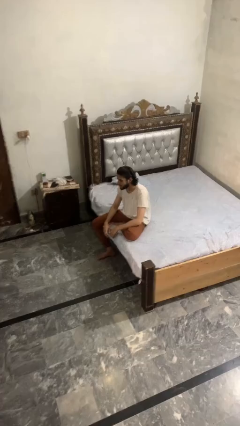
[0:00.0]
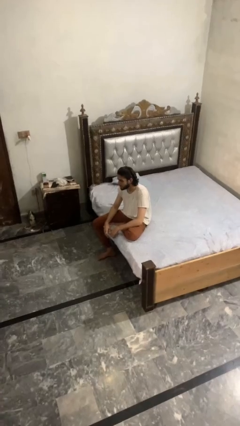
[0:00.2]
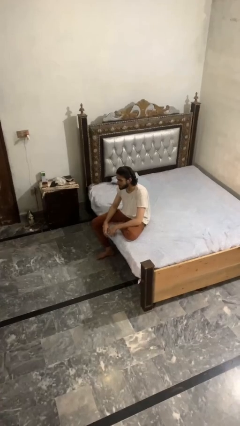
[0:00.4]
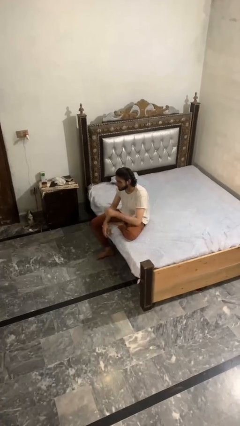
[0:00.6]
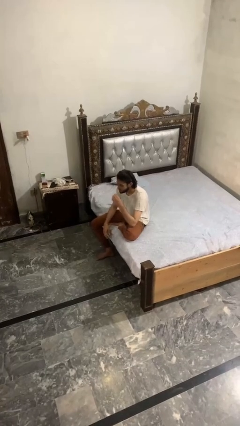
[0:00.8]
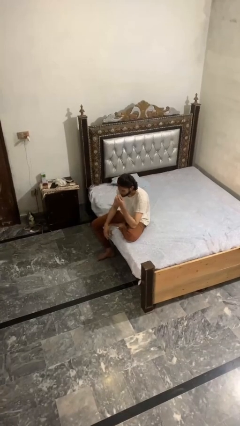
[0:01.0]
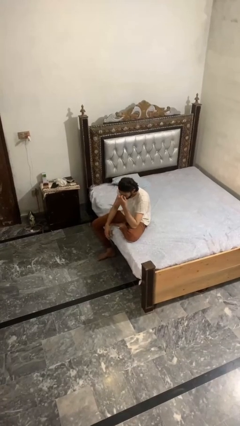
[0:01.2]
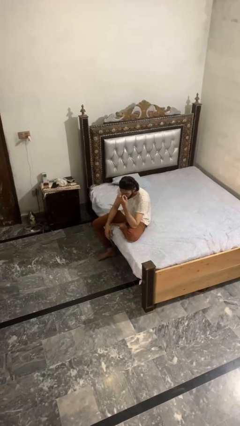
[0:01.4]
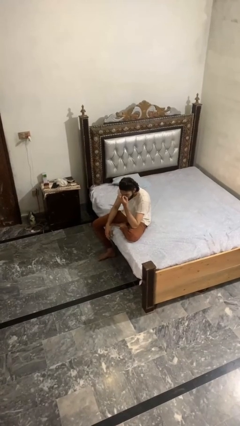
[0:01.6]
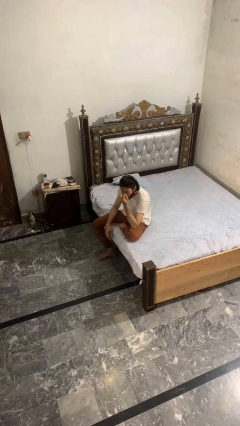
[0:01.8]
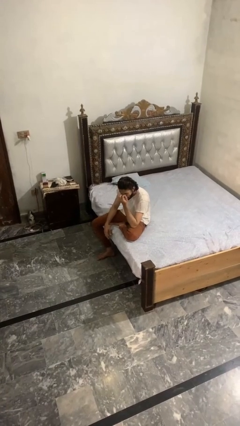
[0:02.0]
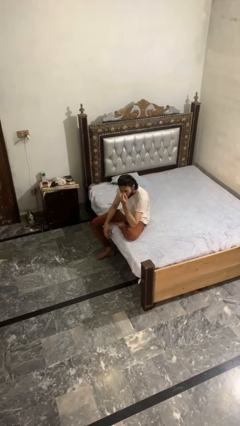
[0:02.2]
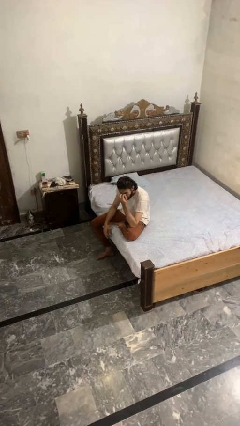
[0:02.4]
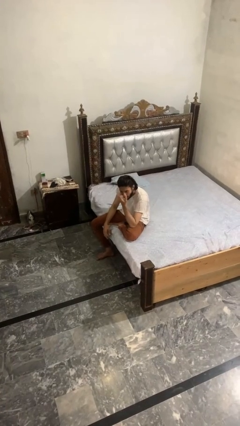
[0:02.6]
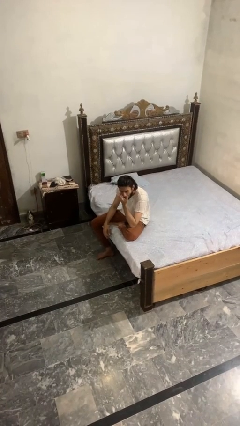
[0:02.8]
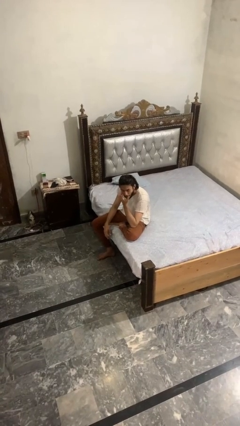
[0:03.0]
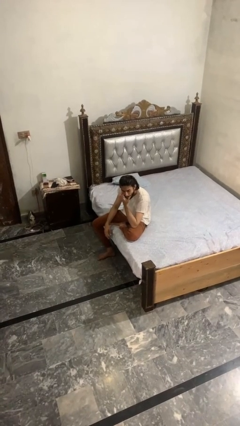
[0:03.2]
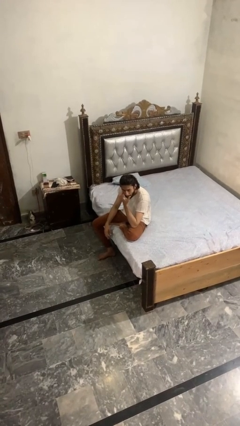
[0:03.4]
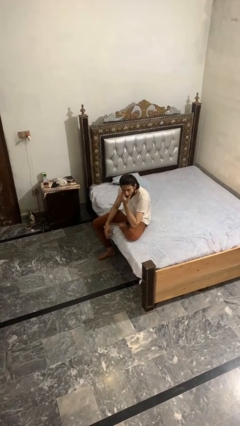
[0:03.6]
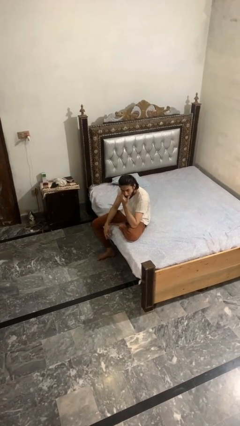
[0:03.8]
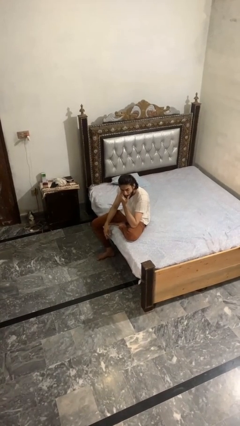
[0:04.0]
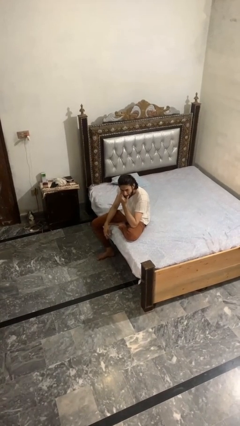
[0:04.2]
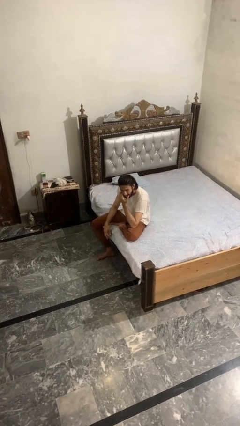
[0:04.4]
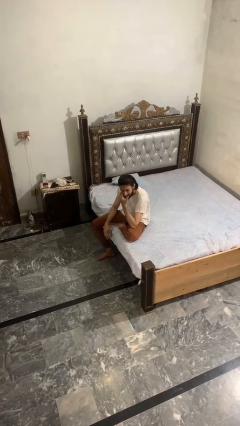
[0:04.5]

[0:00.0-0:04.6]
person scratches face

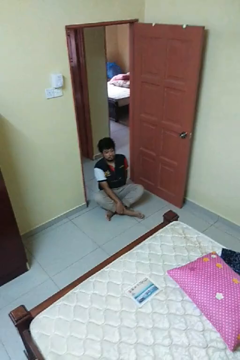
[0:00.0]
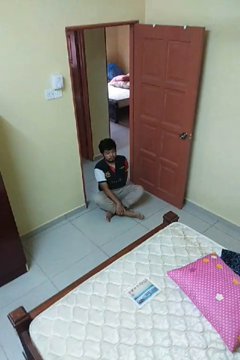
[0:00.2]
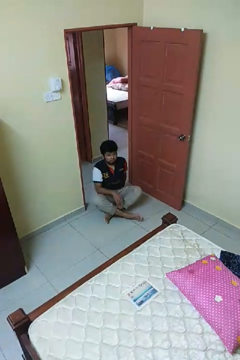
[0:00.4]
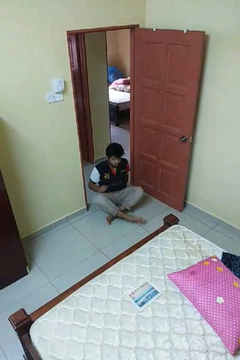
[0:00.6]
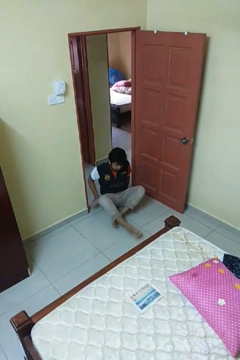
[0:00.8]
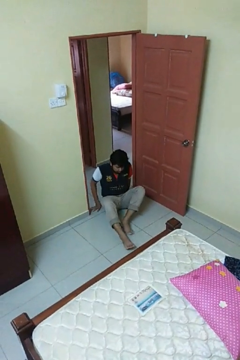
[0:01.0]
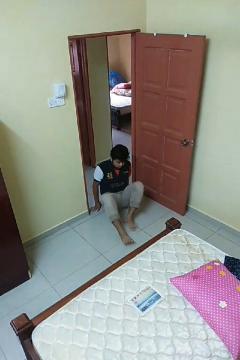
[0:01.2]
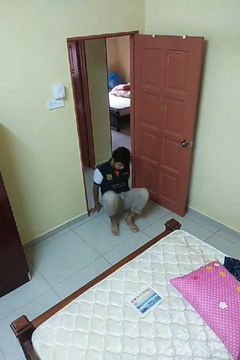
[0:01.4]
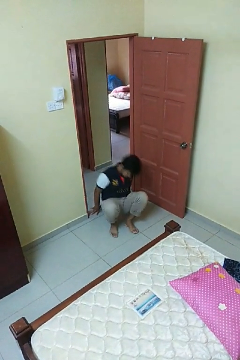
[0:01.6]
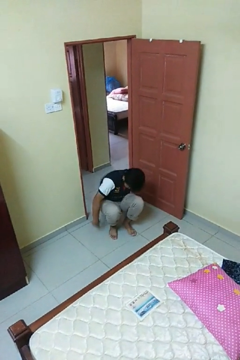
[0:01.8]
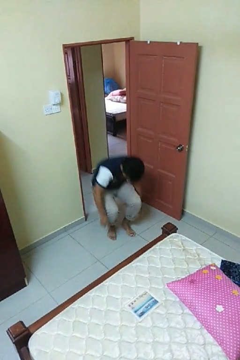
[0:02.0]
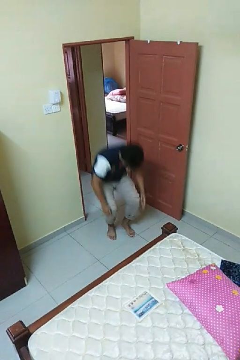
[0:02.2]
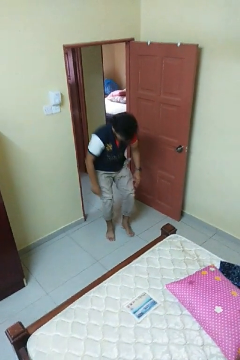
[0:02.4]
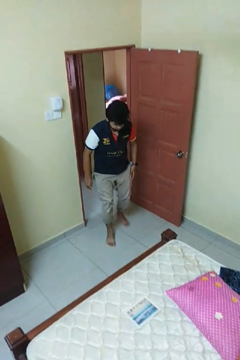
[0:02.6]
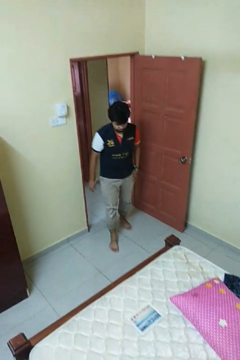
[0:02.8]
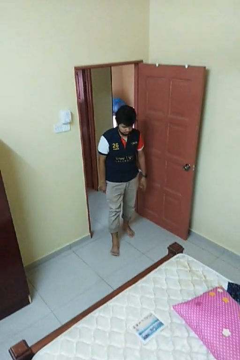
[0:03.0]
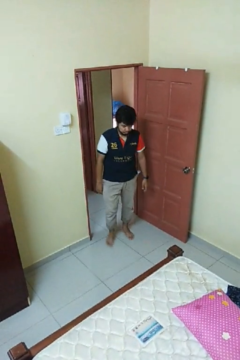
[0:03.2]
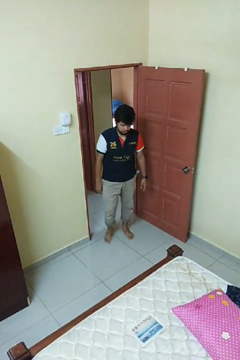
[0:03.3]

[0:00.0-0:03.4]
person stands up from floor

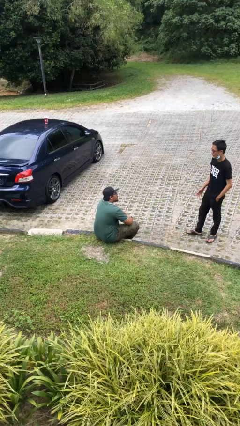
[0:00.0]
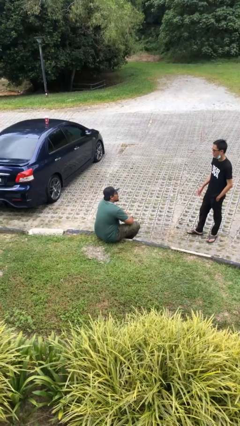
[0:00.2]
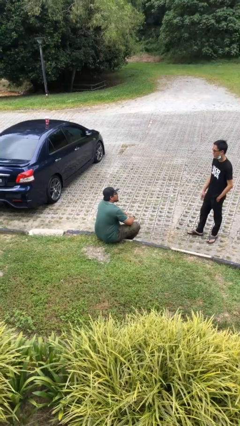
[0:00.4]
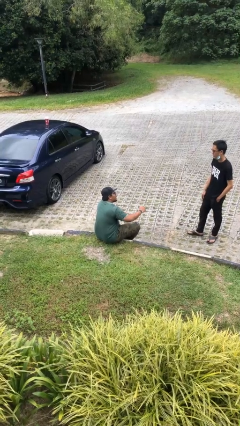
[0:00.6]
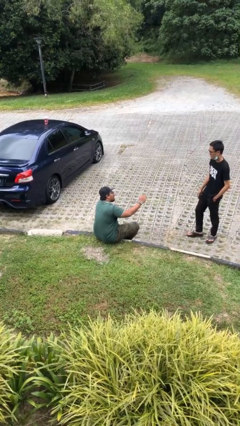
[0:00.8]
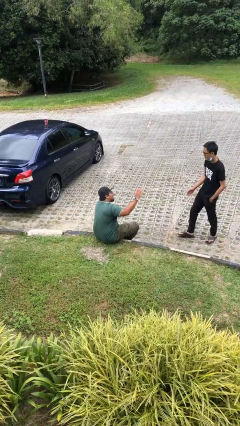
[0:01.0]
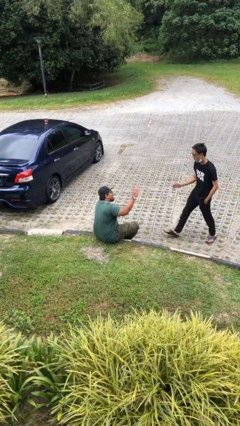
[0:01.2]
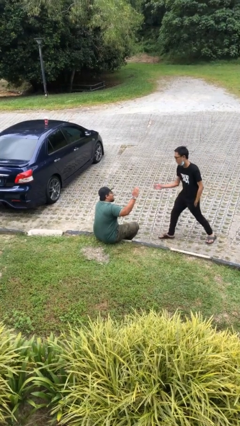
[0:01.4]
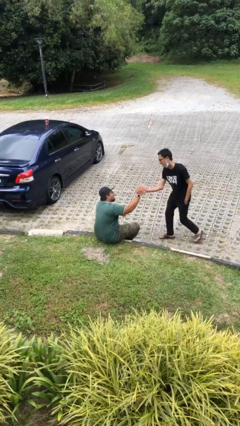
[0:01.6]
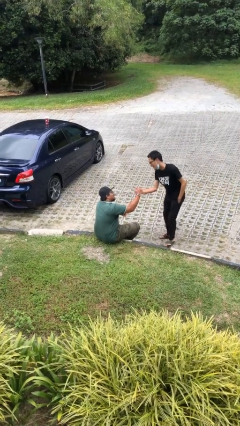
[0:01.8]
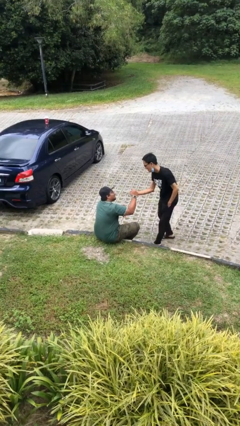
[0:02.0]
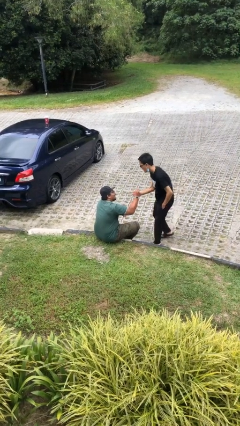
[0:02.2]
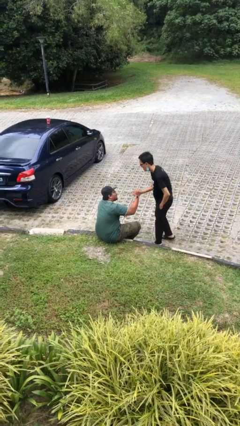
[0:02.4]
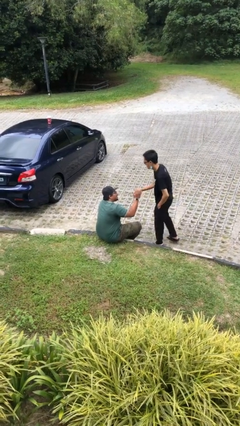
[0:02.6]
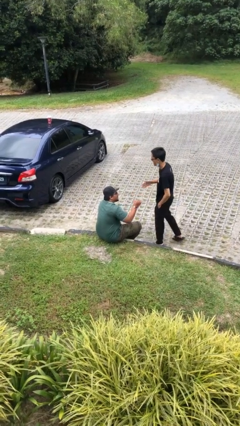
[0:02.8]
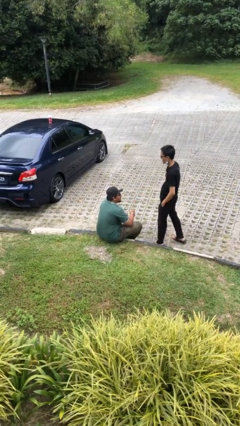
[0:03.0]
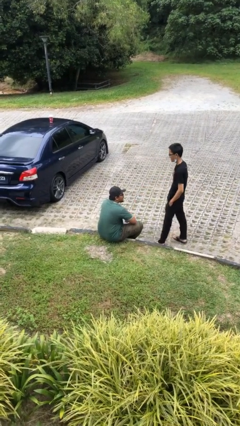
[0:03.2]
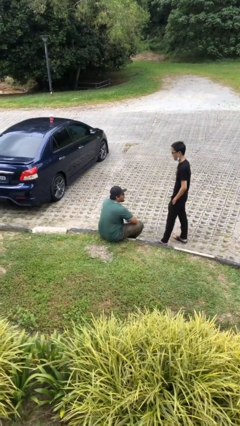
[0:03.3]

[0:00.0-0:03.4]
person shakes hand

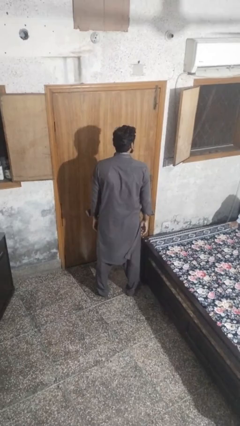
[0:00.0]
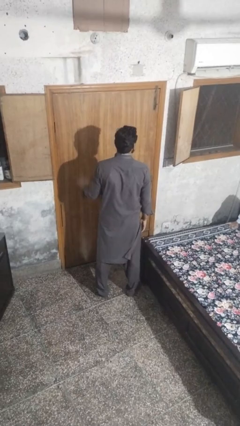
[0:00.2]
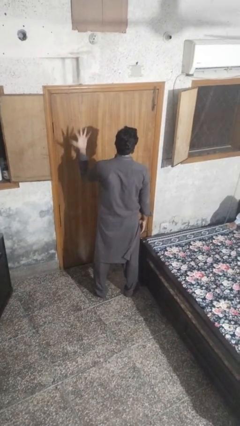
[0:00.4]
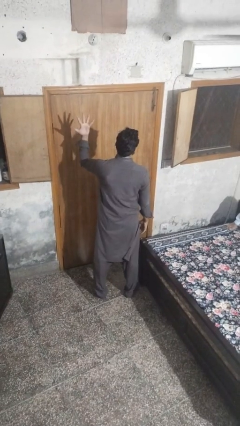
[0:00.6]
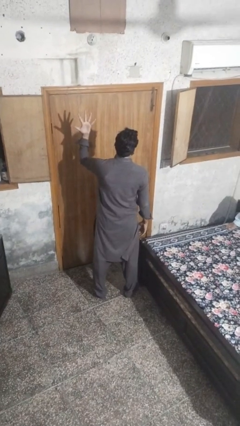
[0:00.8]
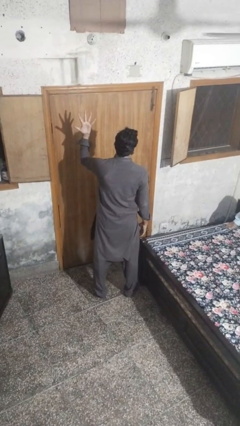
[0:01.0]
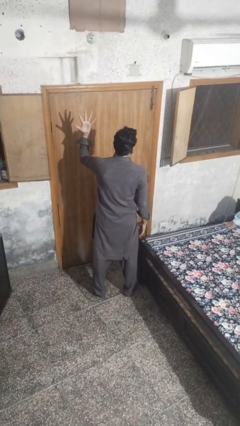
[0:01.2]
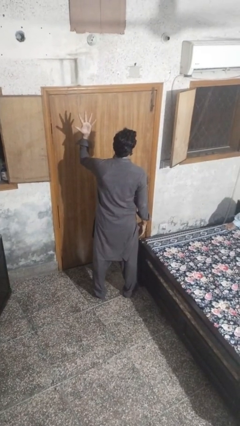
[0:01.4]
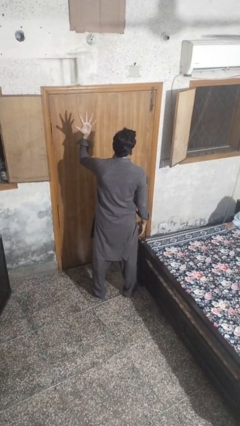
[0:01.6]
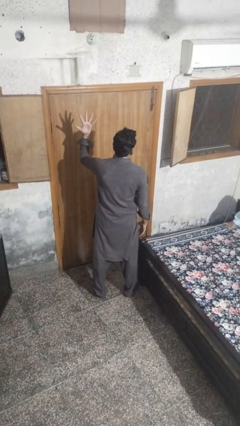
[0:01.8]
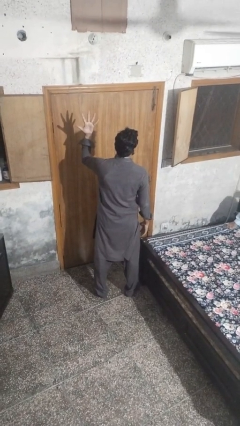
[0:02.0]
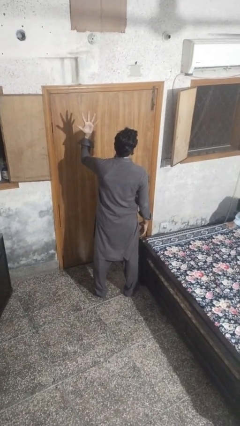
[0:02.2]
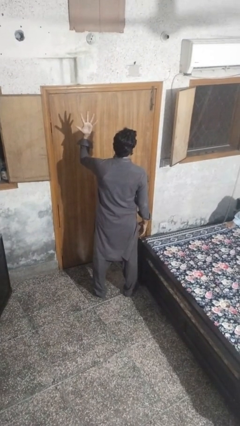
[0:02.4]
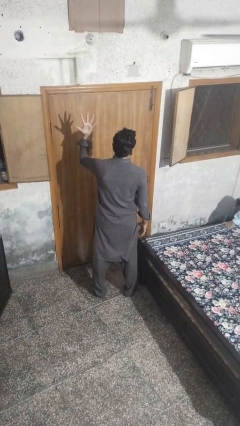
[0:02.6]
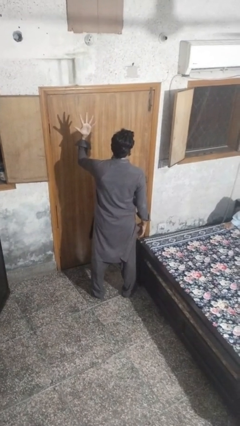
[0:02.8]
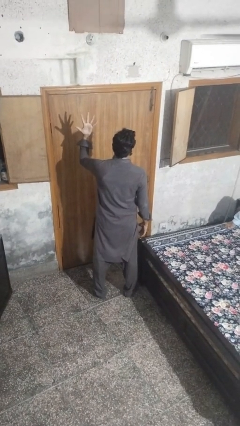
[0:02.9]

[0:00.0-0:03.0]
person gestures number five

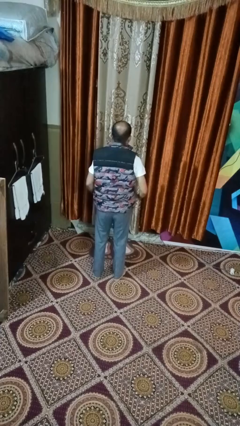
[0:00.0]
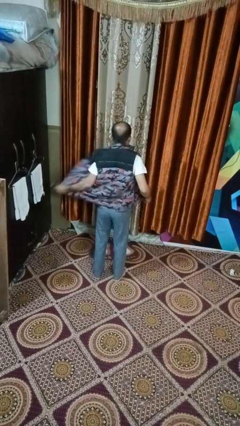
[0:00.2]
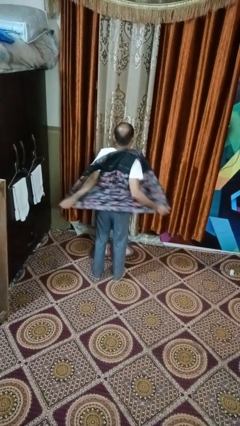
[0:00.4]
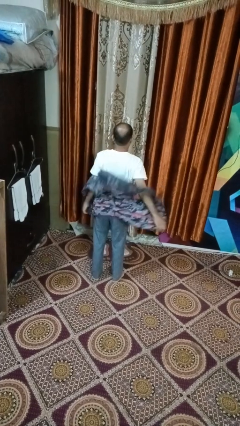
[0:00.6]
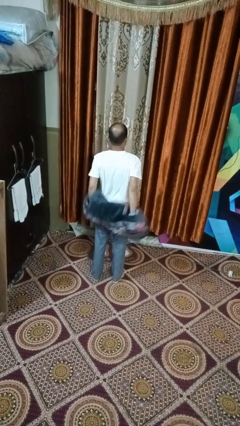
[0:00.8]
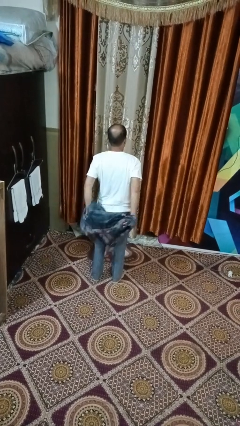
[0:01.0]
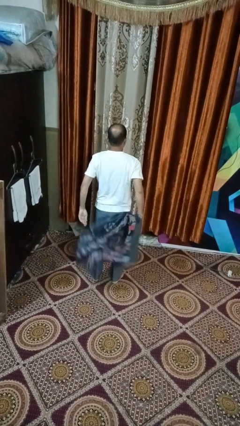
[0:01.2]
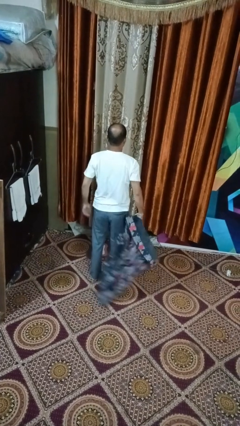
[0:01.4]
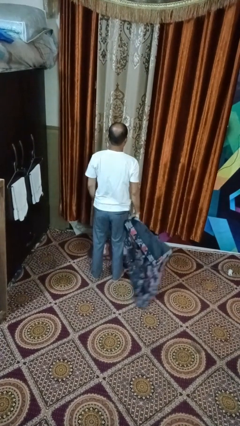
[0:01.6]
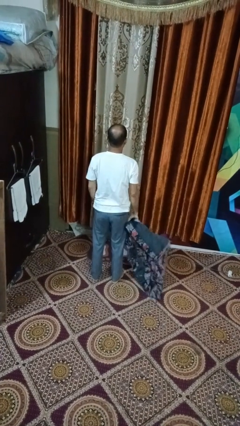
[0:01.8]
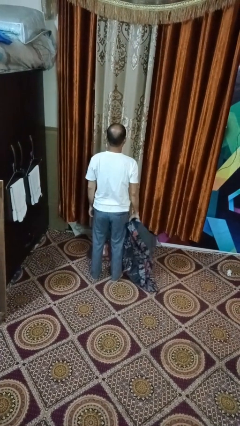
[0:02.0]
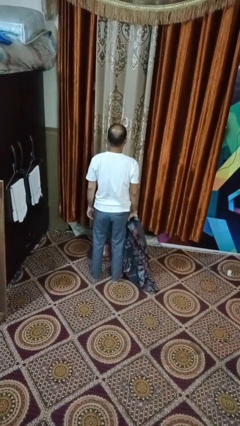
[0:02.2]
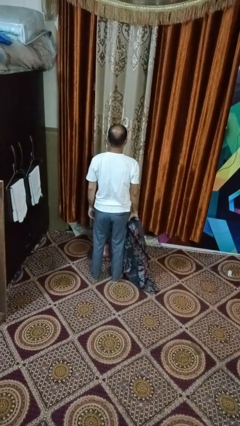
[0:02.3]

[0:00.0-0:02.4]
person takes off jacket

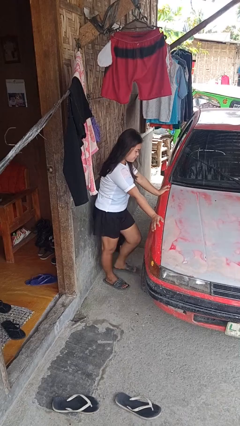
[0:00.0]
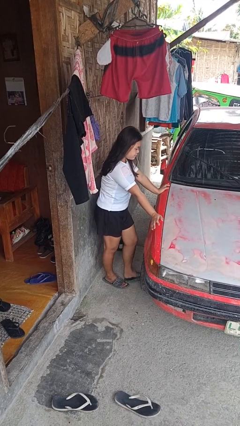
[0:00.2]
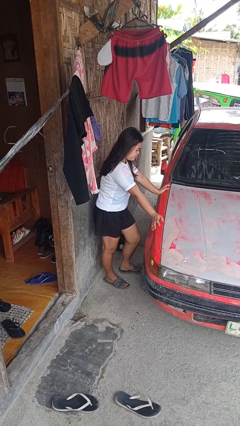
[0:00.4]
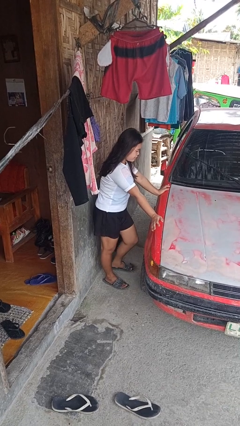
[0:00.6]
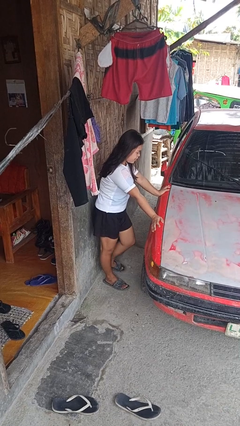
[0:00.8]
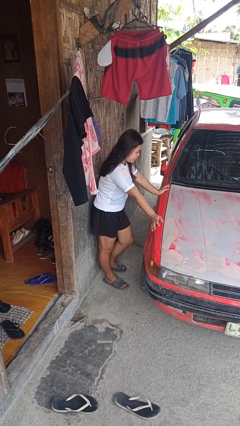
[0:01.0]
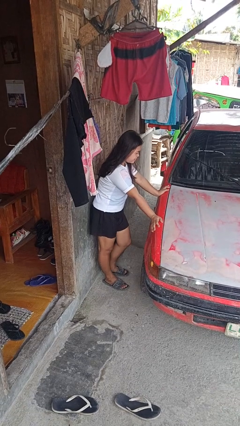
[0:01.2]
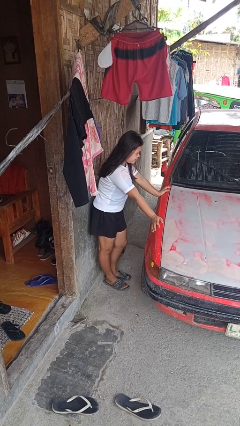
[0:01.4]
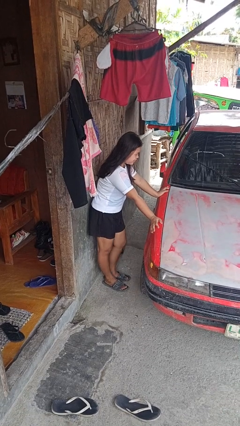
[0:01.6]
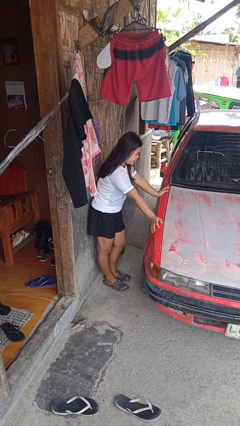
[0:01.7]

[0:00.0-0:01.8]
person kicks car tires
